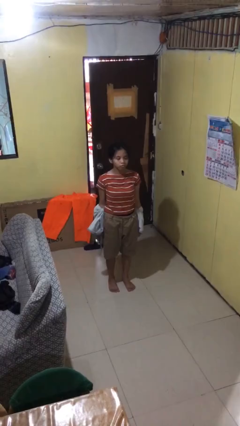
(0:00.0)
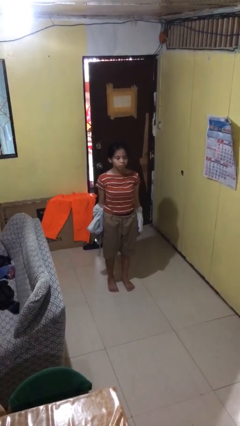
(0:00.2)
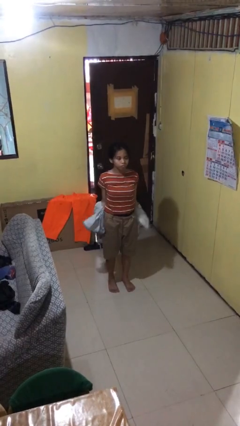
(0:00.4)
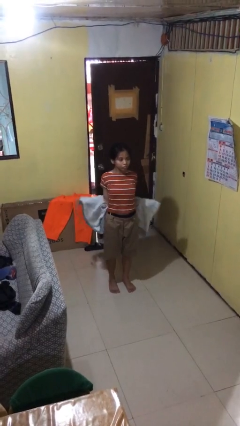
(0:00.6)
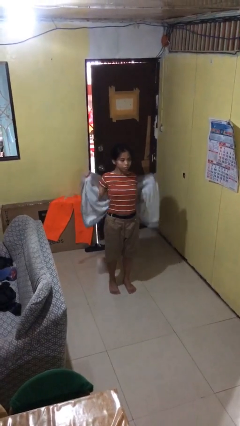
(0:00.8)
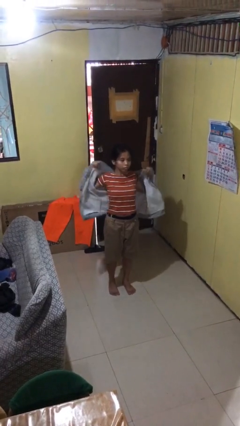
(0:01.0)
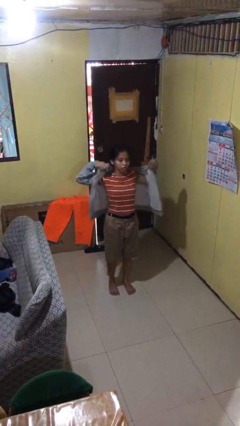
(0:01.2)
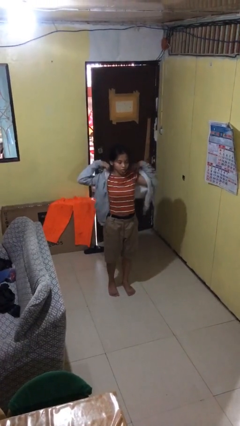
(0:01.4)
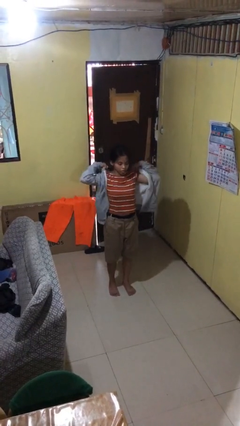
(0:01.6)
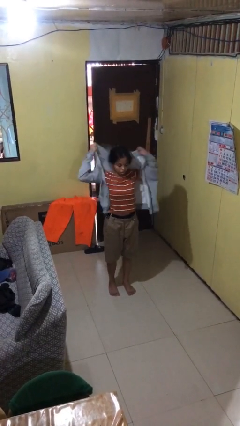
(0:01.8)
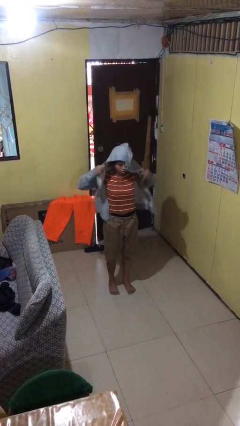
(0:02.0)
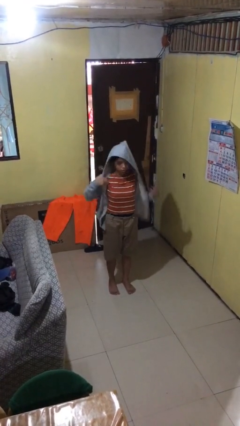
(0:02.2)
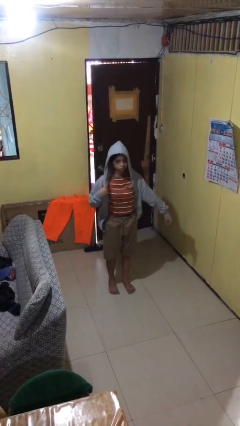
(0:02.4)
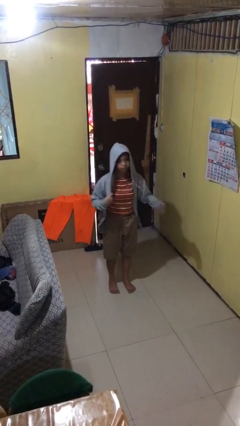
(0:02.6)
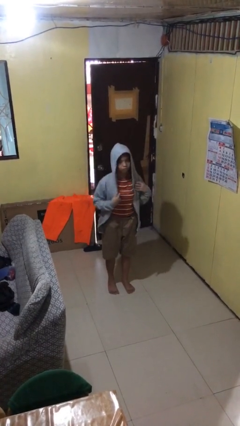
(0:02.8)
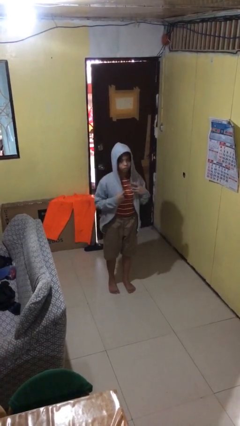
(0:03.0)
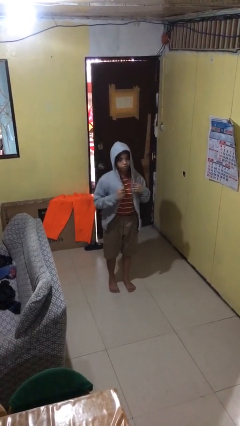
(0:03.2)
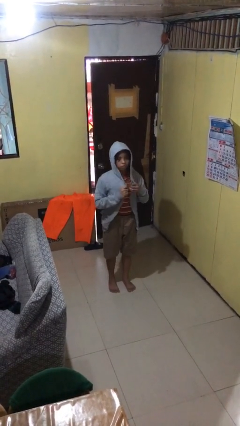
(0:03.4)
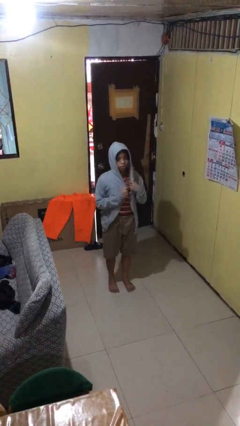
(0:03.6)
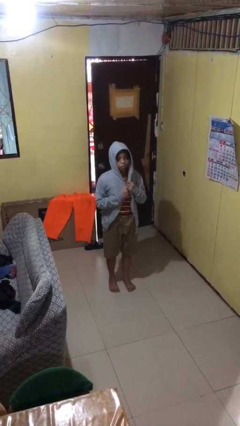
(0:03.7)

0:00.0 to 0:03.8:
person puts on hoodie

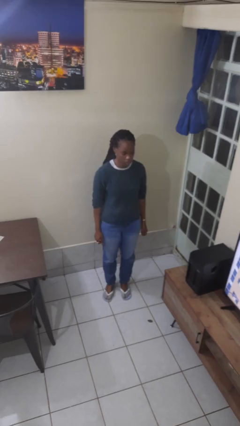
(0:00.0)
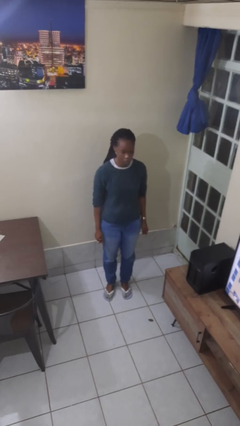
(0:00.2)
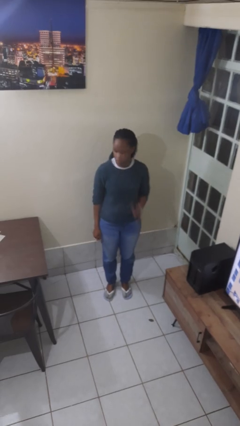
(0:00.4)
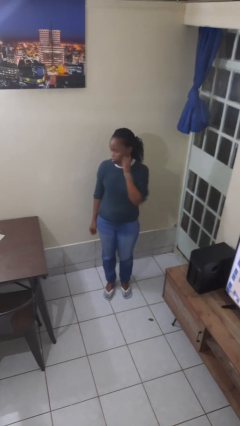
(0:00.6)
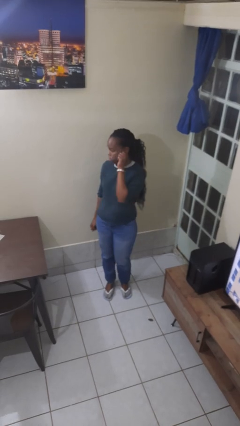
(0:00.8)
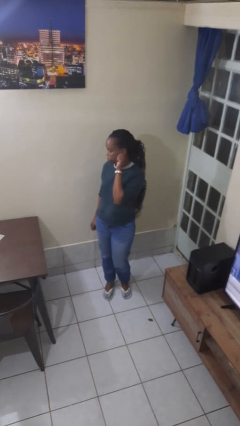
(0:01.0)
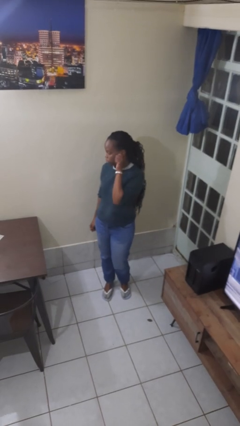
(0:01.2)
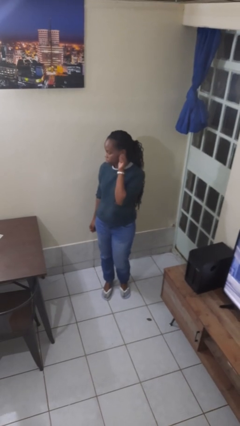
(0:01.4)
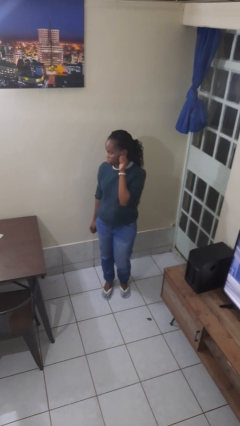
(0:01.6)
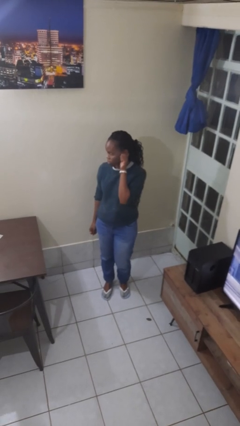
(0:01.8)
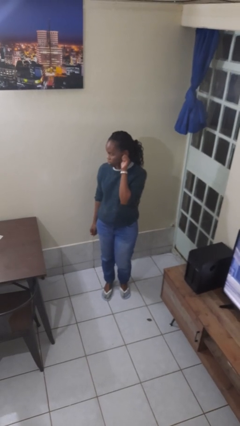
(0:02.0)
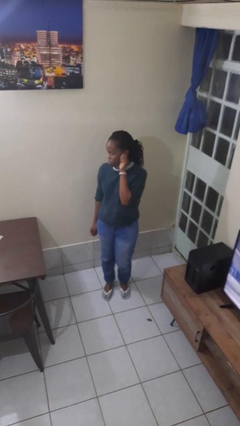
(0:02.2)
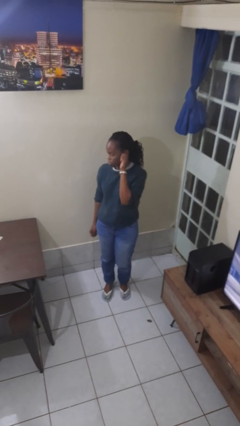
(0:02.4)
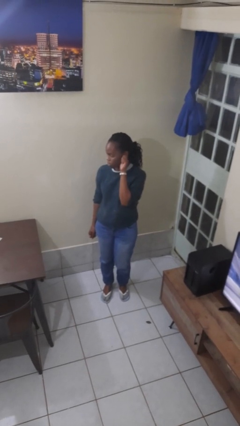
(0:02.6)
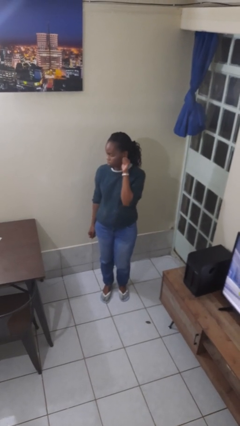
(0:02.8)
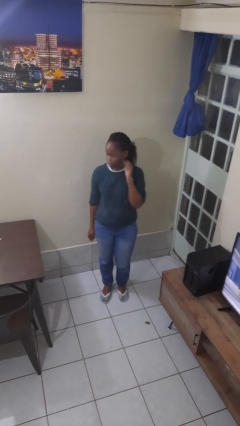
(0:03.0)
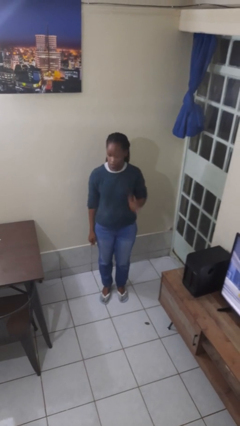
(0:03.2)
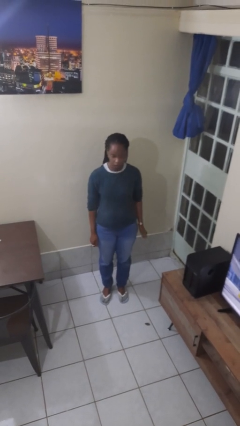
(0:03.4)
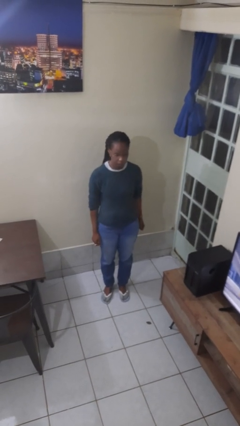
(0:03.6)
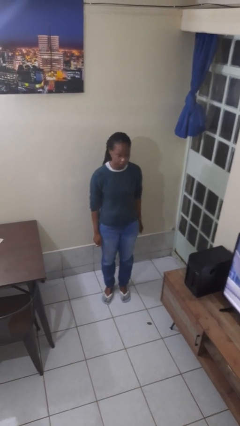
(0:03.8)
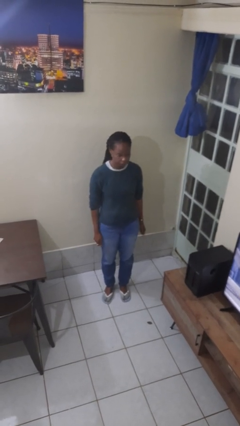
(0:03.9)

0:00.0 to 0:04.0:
person touches earlobe

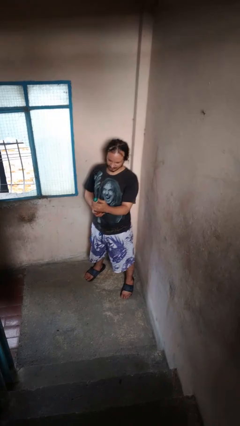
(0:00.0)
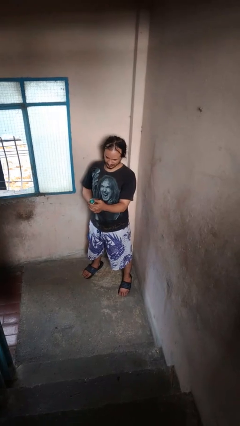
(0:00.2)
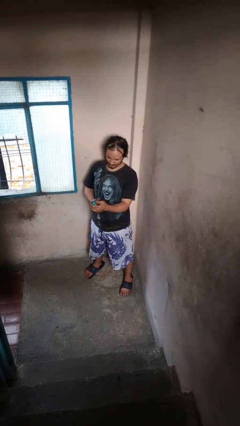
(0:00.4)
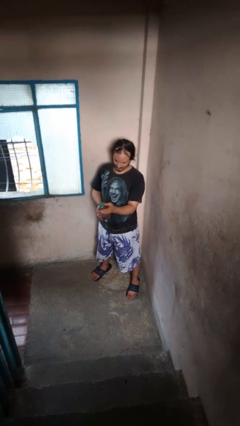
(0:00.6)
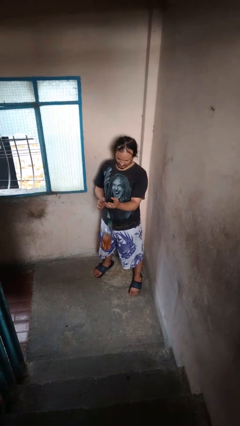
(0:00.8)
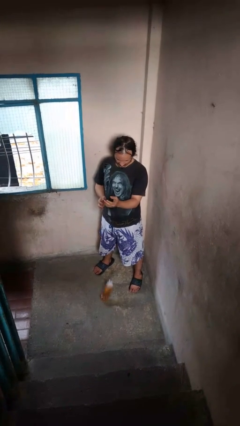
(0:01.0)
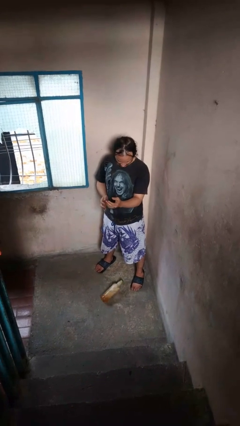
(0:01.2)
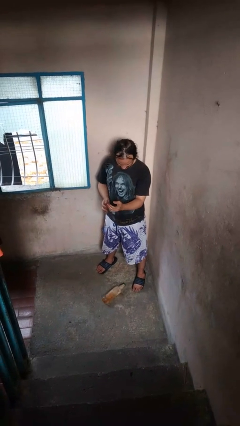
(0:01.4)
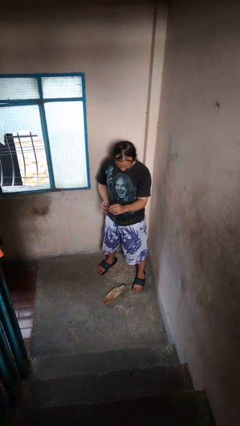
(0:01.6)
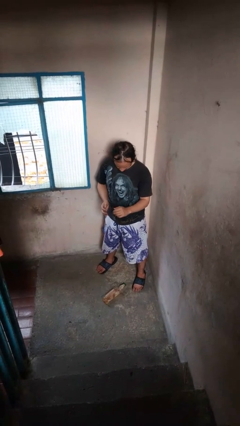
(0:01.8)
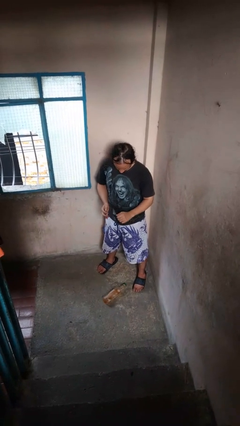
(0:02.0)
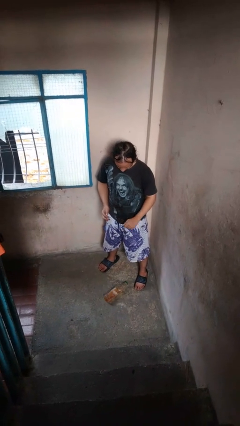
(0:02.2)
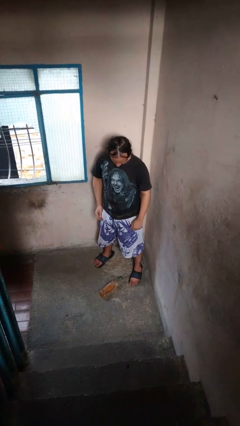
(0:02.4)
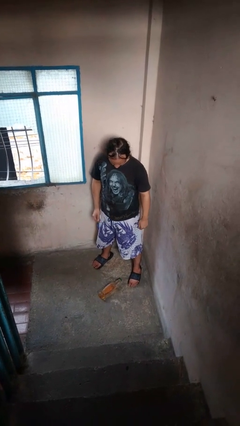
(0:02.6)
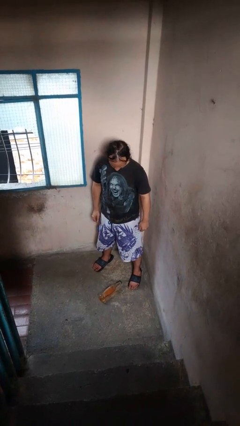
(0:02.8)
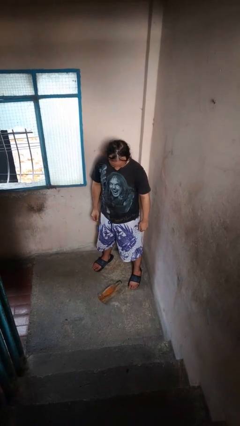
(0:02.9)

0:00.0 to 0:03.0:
person drops object

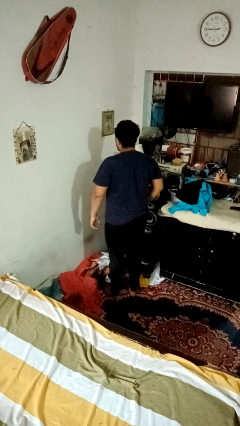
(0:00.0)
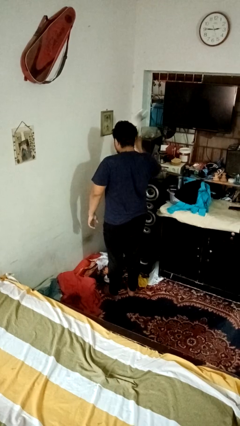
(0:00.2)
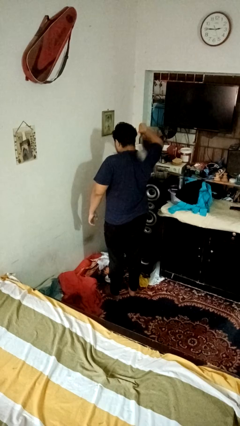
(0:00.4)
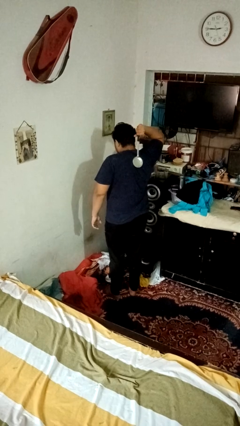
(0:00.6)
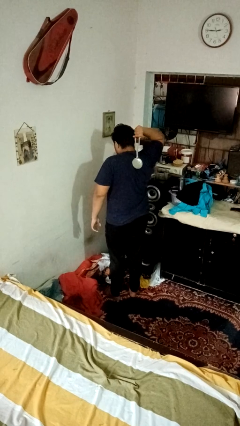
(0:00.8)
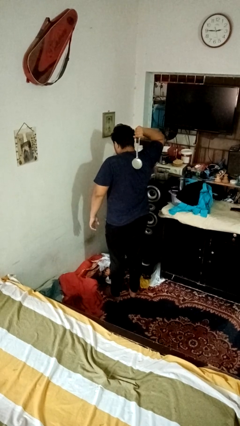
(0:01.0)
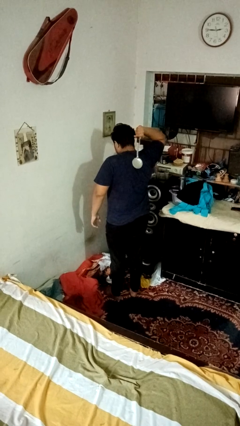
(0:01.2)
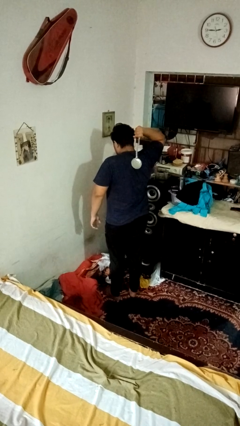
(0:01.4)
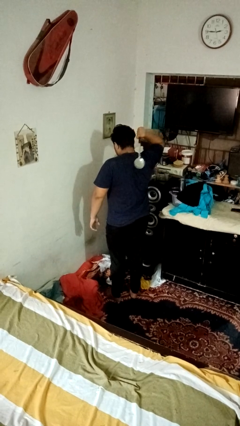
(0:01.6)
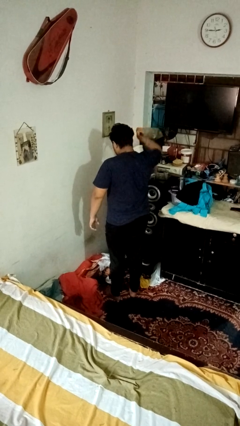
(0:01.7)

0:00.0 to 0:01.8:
person swats bug

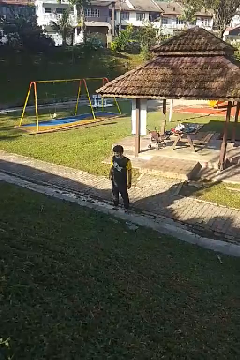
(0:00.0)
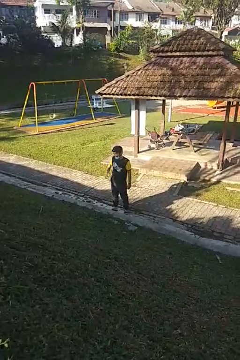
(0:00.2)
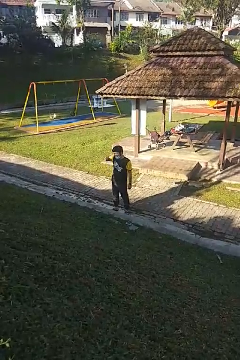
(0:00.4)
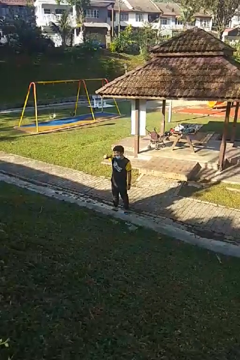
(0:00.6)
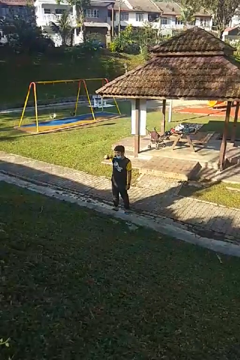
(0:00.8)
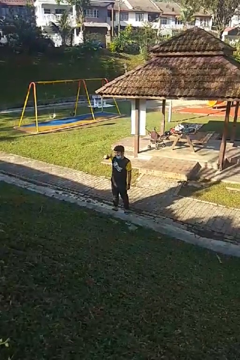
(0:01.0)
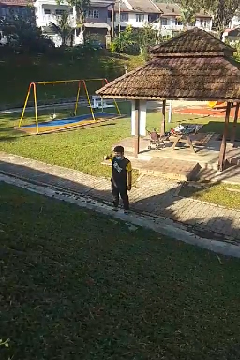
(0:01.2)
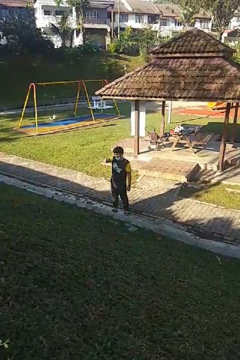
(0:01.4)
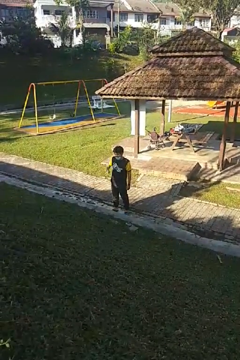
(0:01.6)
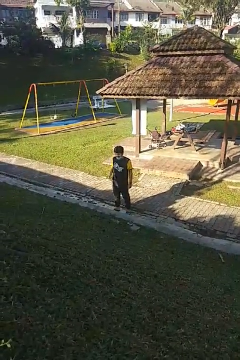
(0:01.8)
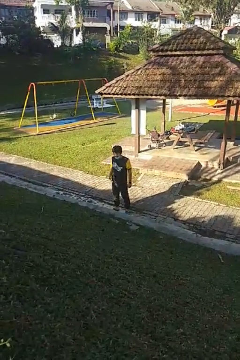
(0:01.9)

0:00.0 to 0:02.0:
person brushes teeth

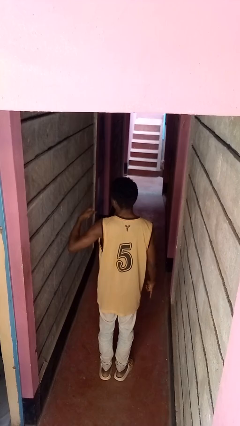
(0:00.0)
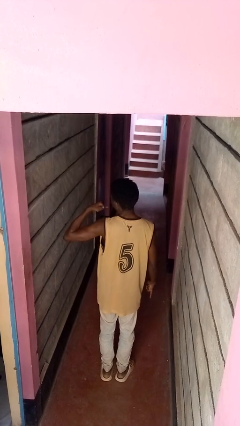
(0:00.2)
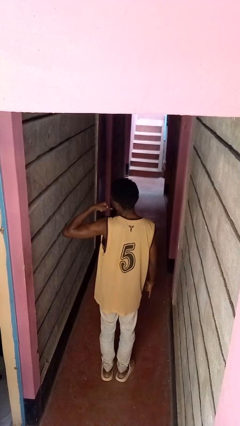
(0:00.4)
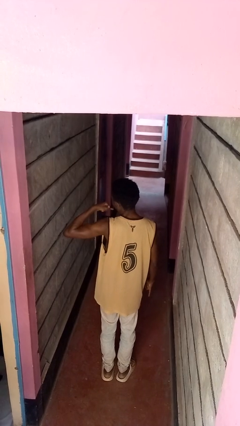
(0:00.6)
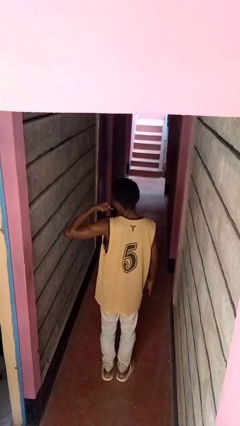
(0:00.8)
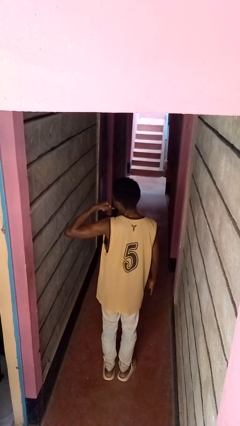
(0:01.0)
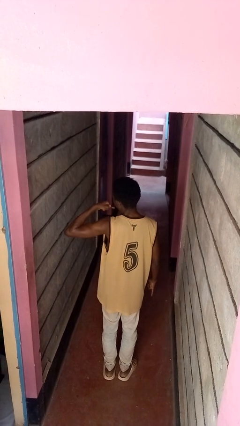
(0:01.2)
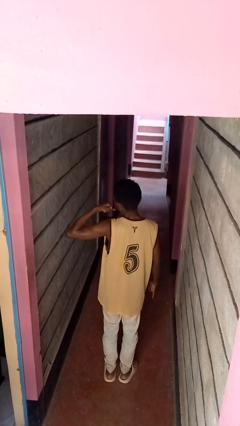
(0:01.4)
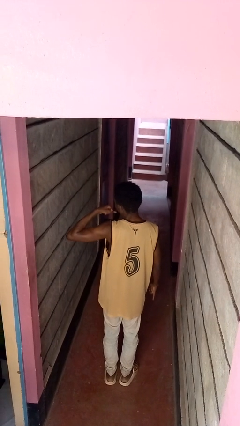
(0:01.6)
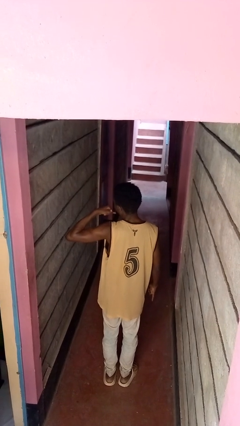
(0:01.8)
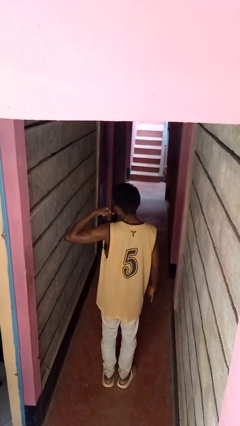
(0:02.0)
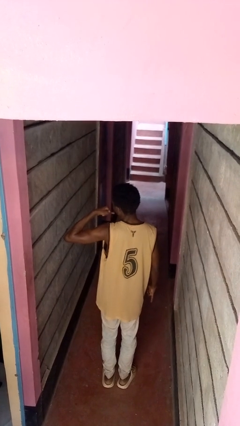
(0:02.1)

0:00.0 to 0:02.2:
person gestures call me

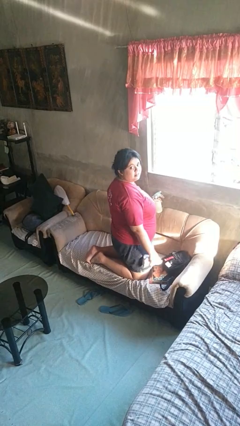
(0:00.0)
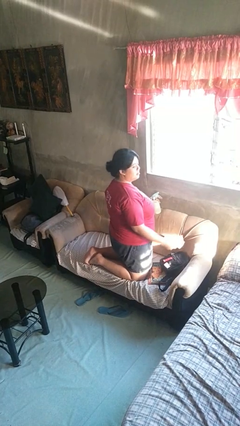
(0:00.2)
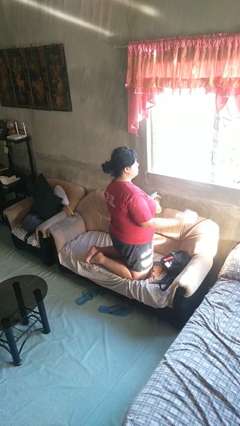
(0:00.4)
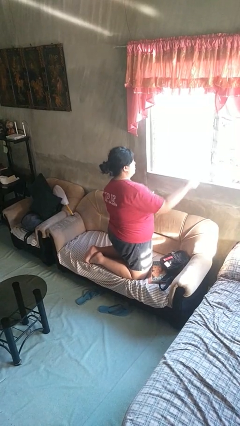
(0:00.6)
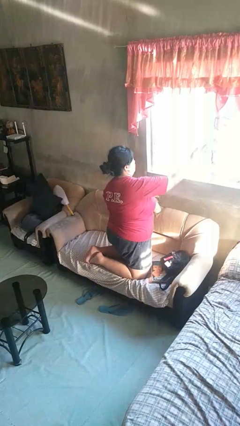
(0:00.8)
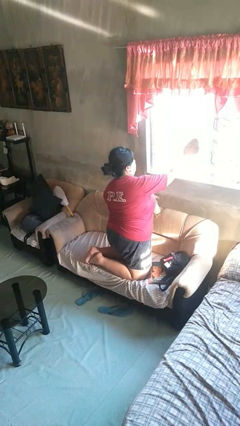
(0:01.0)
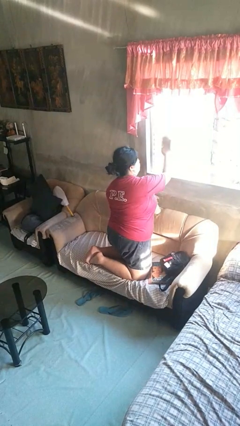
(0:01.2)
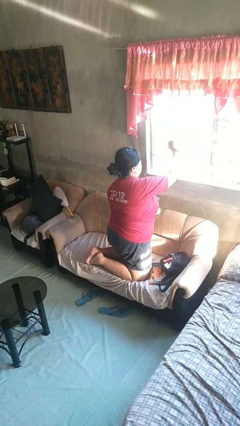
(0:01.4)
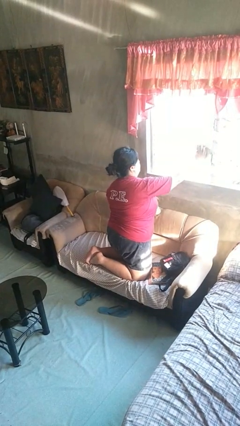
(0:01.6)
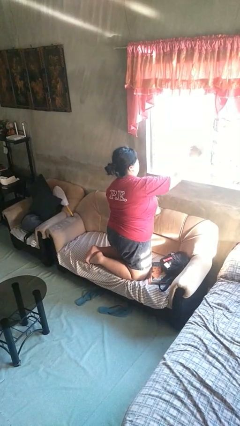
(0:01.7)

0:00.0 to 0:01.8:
person washes window
